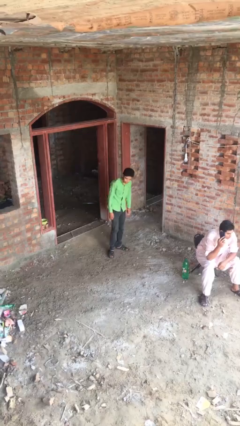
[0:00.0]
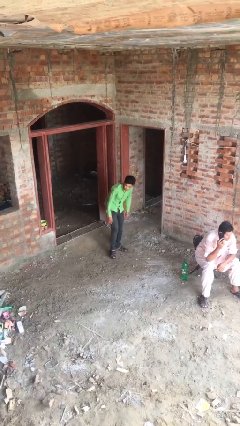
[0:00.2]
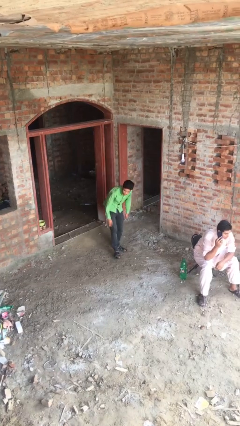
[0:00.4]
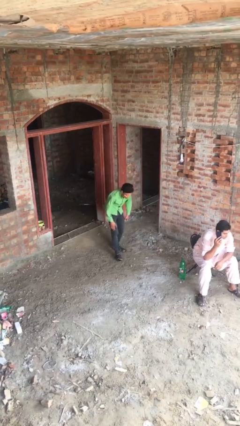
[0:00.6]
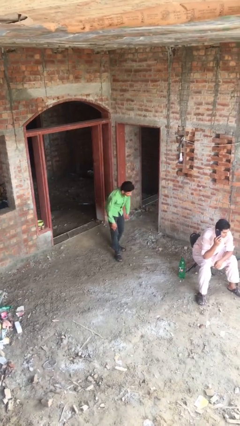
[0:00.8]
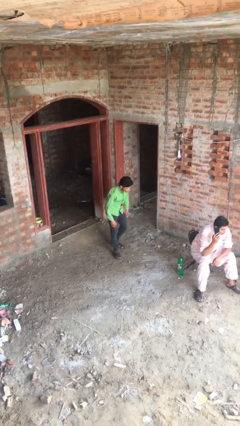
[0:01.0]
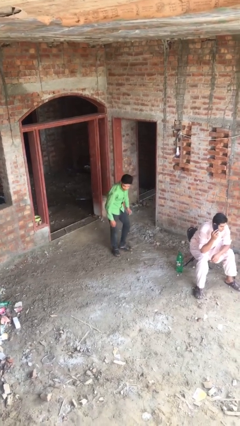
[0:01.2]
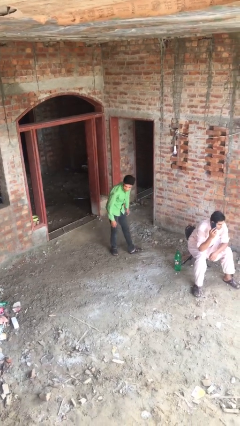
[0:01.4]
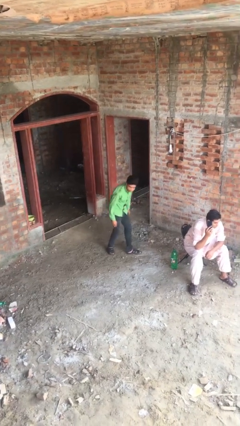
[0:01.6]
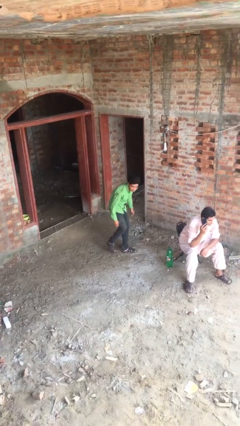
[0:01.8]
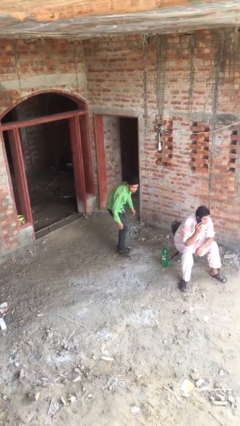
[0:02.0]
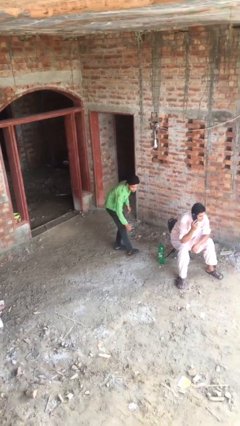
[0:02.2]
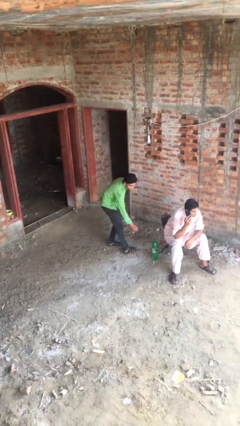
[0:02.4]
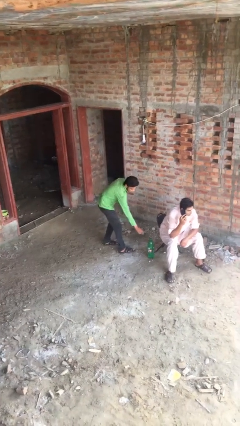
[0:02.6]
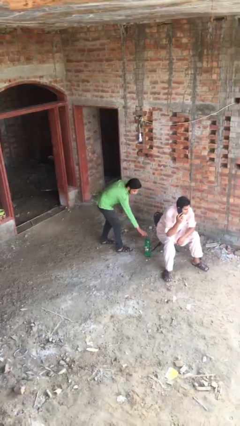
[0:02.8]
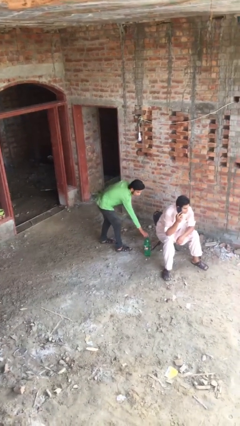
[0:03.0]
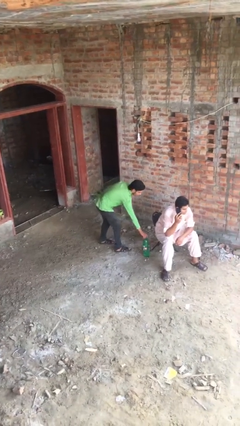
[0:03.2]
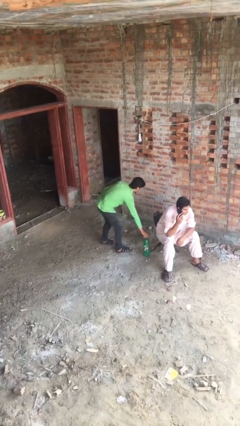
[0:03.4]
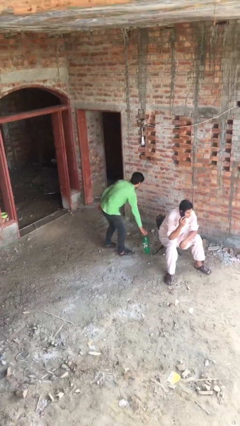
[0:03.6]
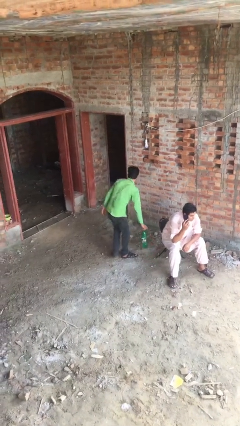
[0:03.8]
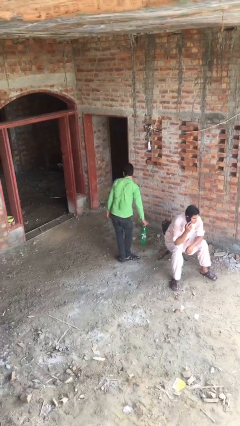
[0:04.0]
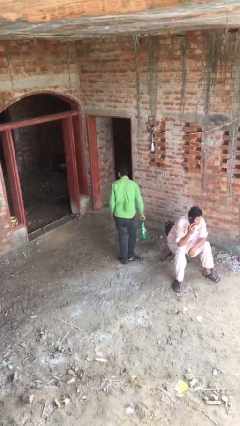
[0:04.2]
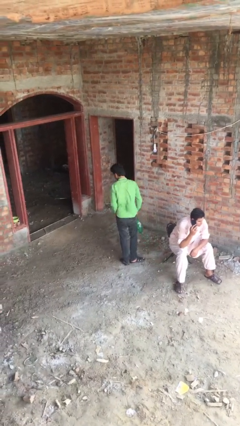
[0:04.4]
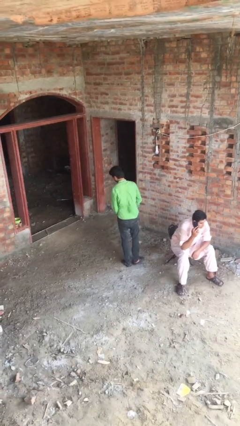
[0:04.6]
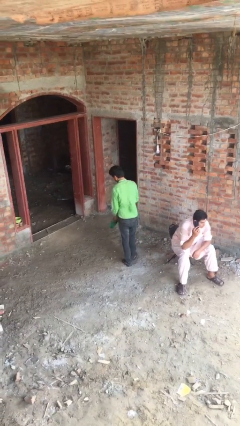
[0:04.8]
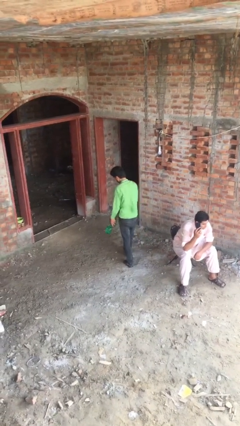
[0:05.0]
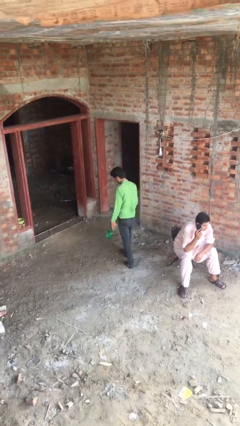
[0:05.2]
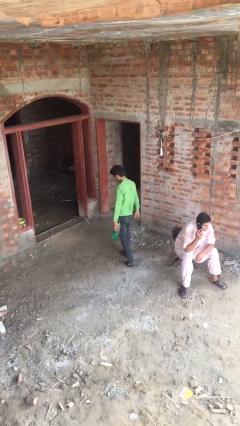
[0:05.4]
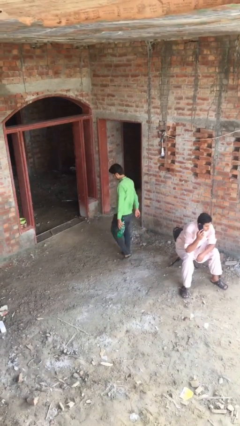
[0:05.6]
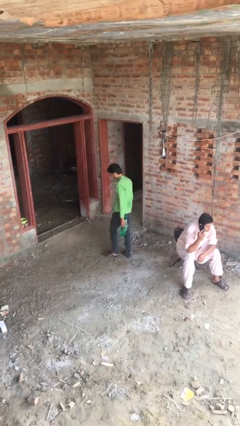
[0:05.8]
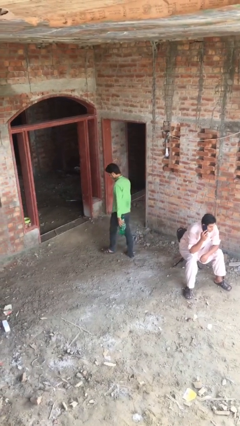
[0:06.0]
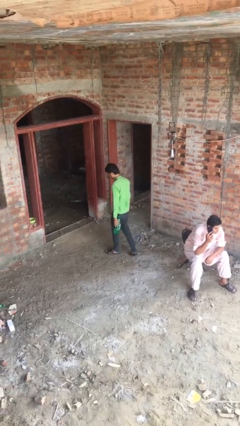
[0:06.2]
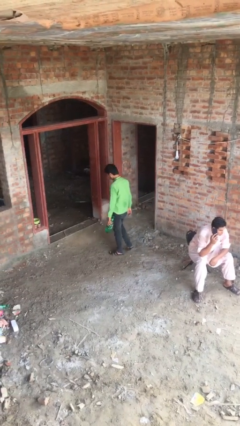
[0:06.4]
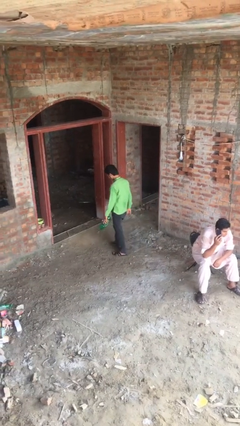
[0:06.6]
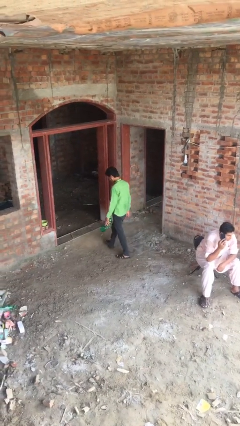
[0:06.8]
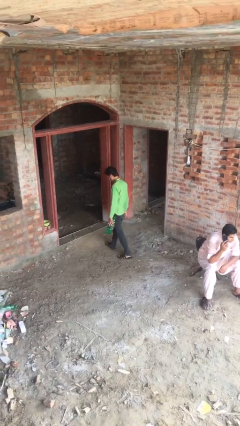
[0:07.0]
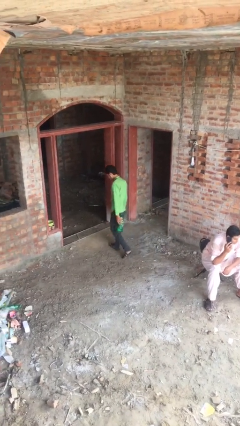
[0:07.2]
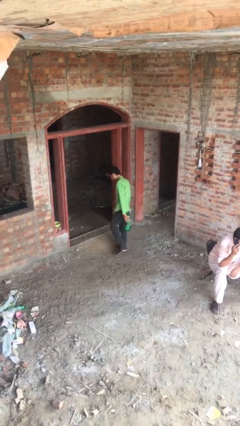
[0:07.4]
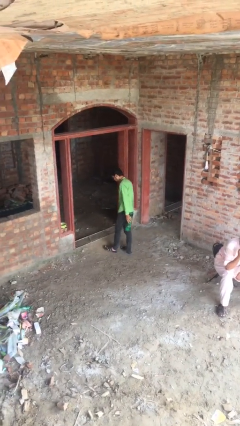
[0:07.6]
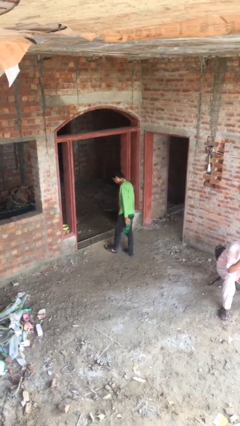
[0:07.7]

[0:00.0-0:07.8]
person steals object from person

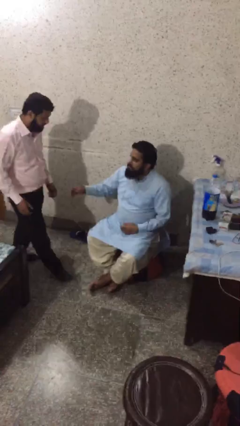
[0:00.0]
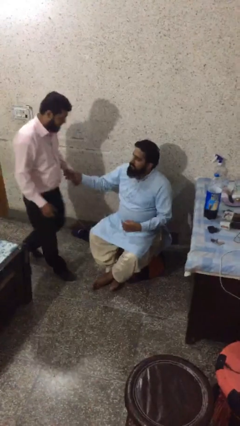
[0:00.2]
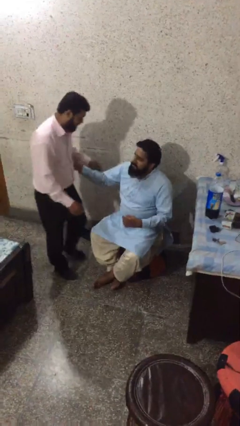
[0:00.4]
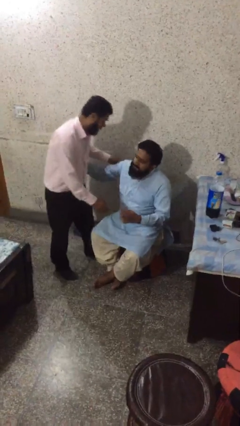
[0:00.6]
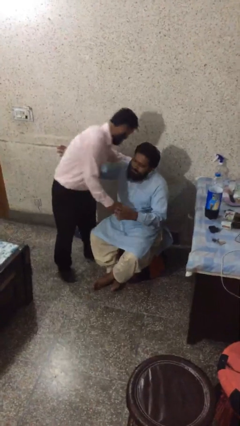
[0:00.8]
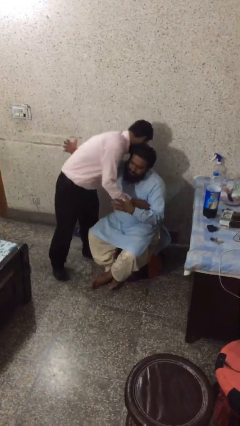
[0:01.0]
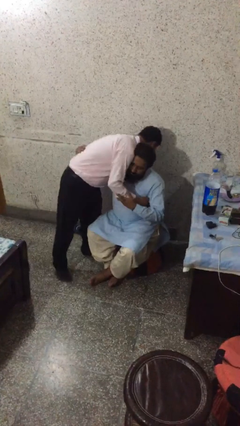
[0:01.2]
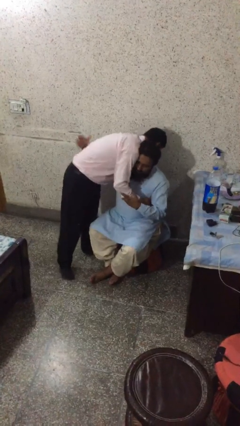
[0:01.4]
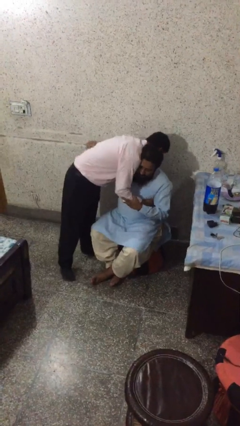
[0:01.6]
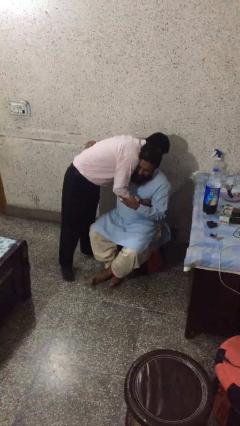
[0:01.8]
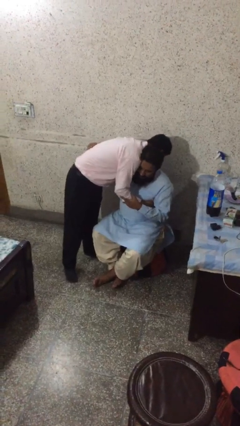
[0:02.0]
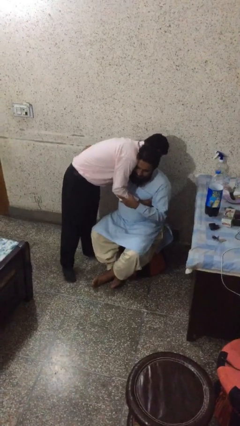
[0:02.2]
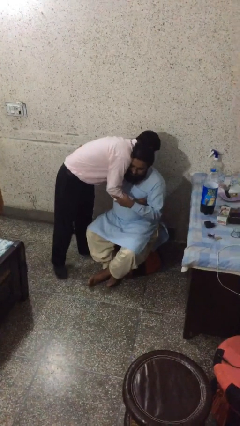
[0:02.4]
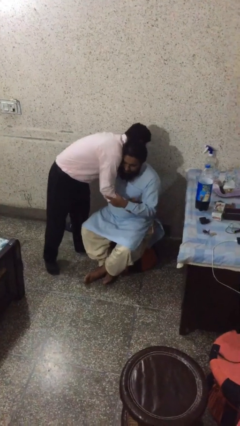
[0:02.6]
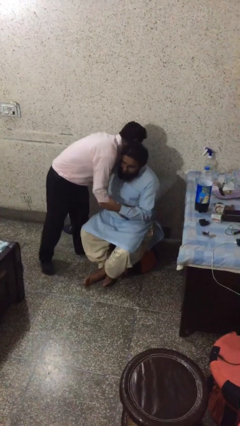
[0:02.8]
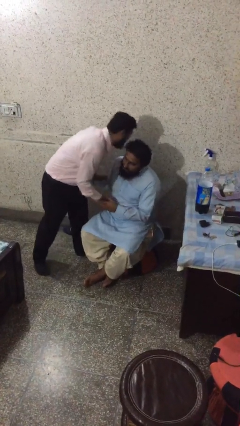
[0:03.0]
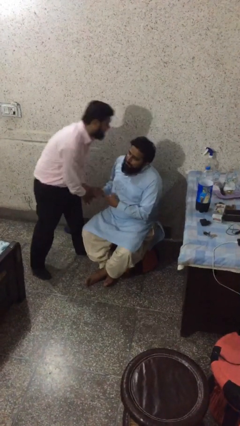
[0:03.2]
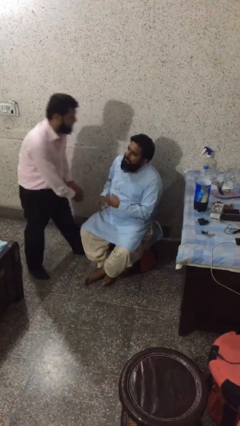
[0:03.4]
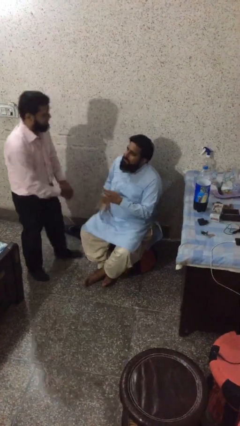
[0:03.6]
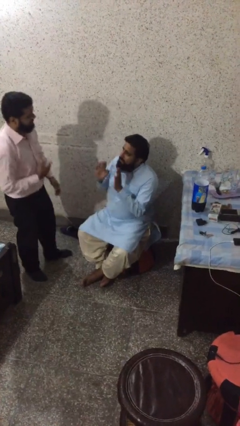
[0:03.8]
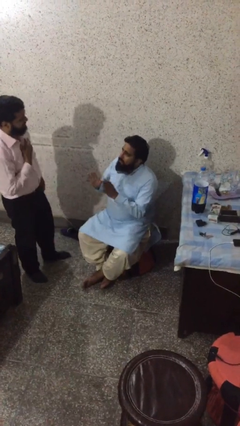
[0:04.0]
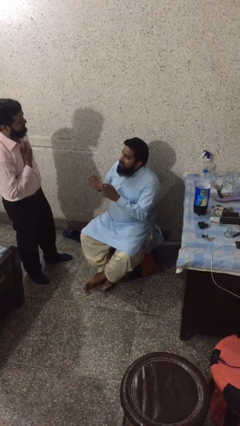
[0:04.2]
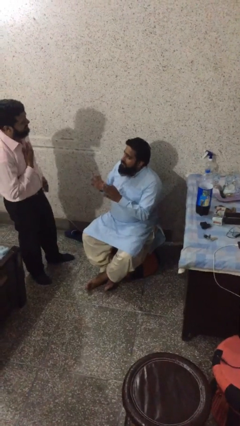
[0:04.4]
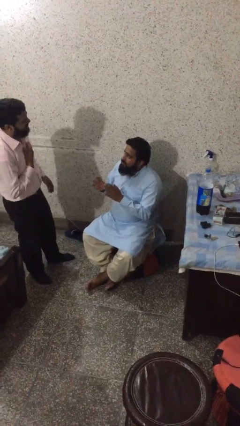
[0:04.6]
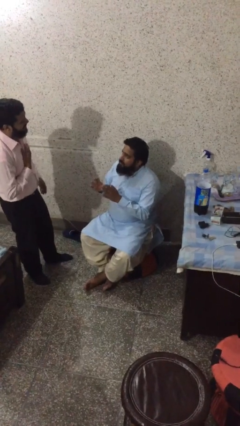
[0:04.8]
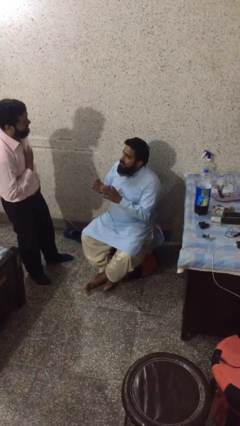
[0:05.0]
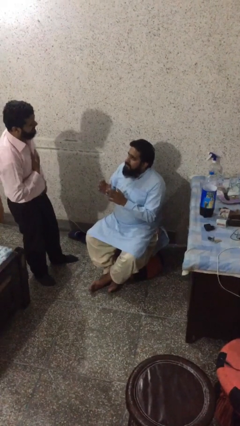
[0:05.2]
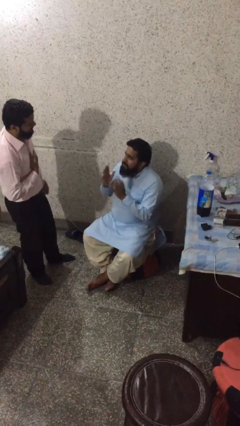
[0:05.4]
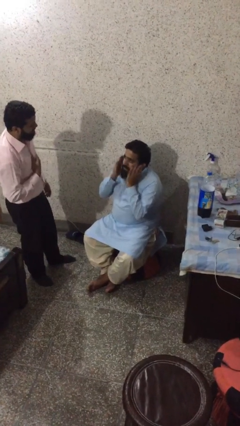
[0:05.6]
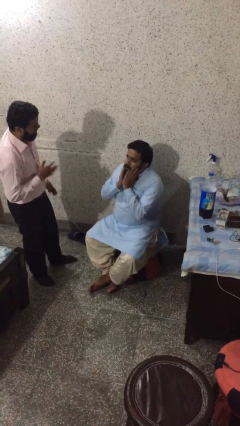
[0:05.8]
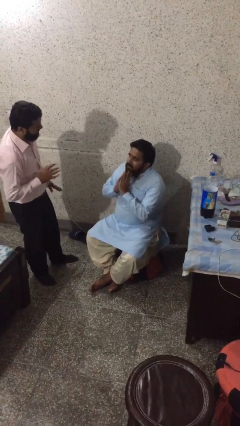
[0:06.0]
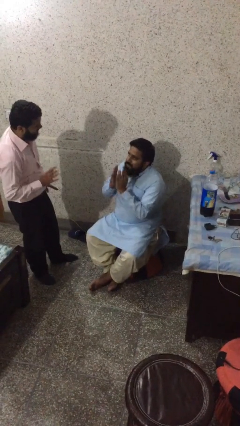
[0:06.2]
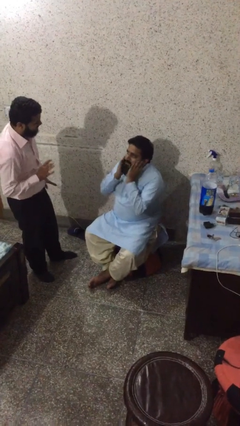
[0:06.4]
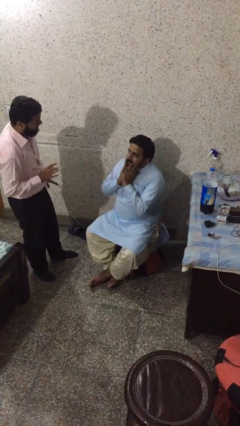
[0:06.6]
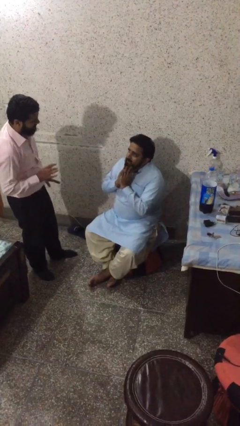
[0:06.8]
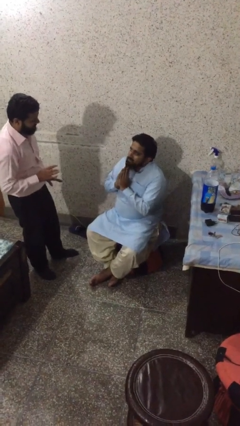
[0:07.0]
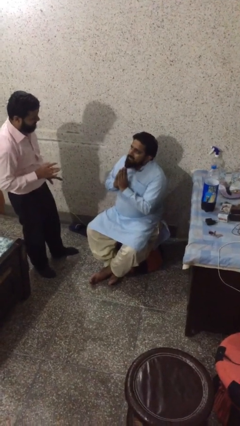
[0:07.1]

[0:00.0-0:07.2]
person embraces person

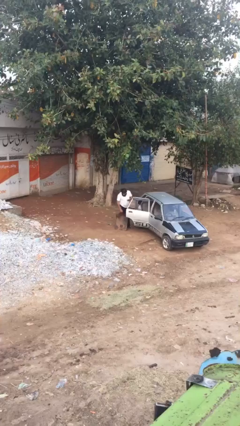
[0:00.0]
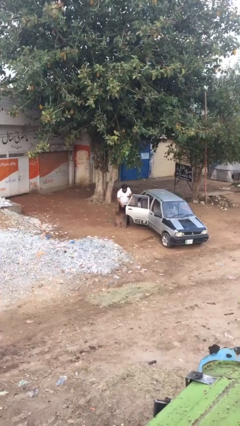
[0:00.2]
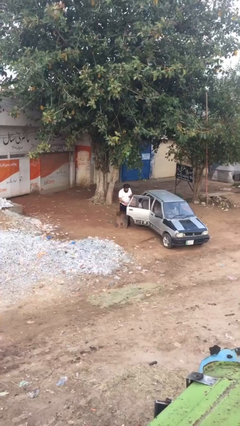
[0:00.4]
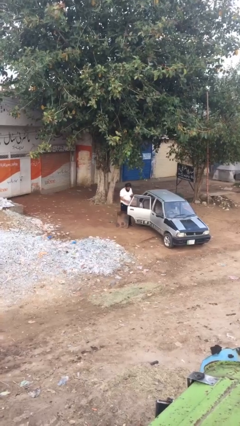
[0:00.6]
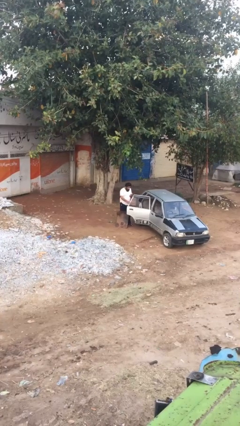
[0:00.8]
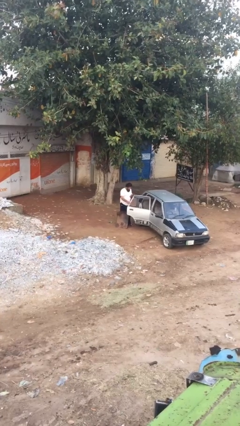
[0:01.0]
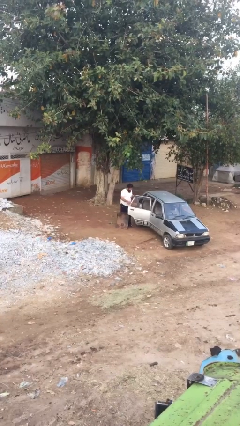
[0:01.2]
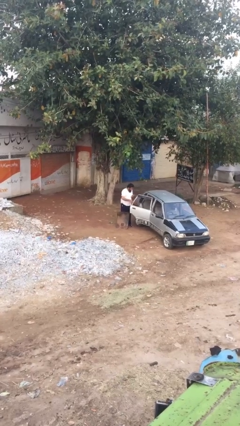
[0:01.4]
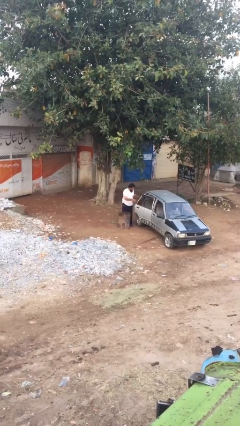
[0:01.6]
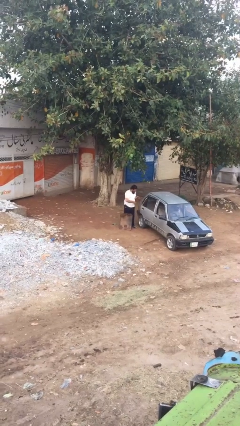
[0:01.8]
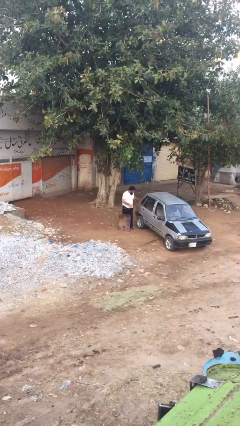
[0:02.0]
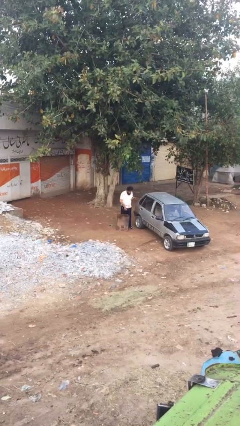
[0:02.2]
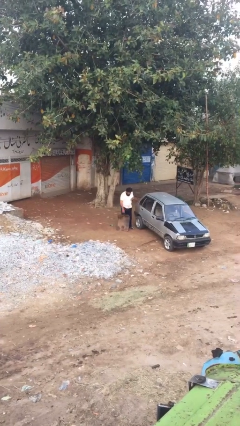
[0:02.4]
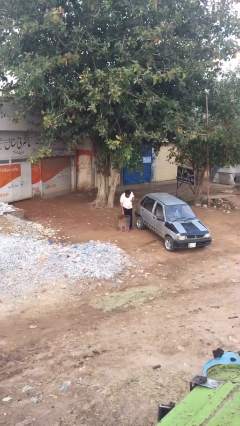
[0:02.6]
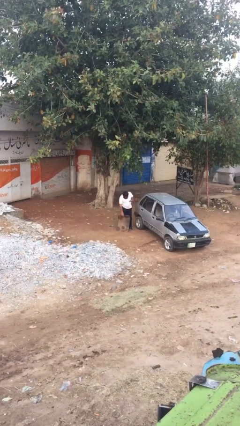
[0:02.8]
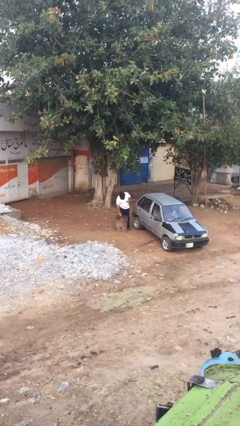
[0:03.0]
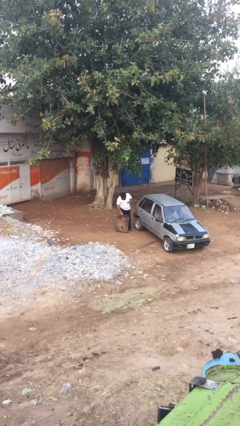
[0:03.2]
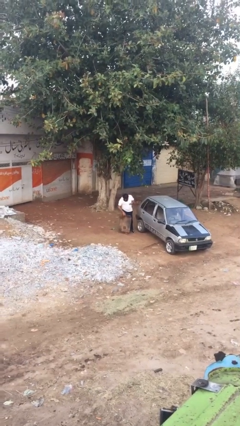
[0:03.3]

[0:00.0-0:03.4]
person closes car door
